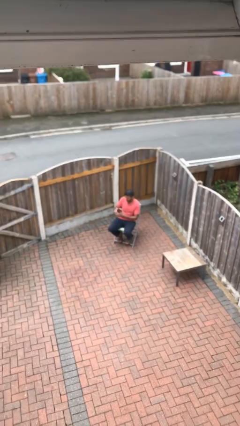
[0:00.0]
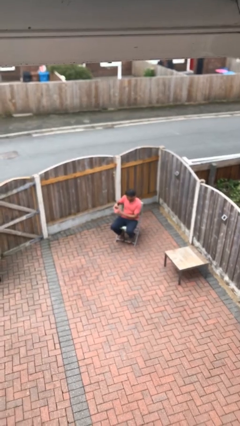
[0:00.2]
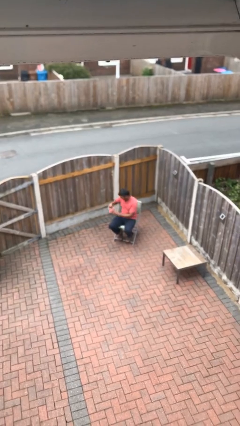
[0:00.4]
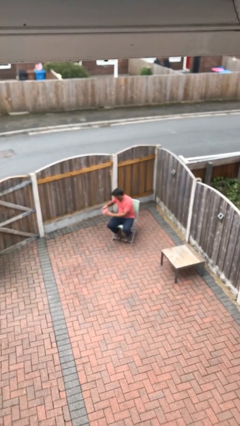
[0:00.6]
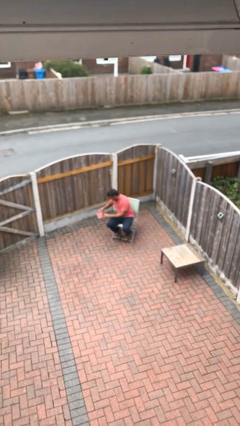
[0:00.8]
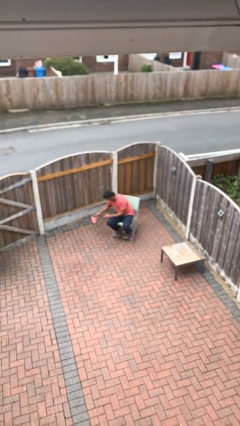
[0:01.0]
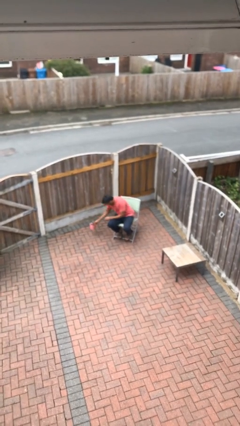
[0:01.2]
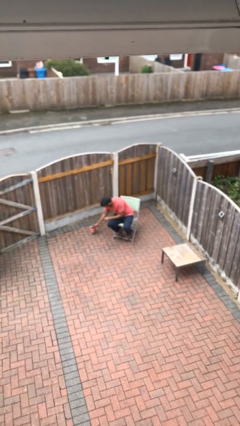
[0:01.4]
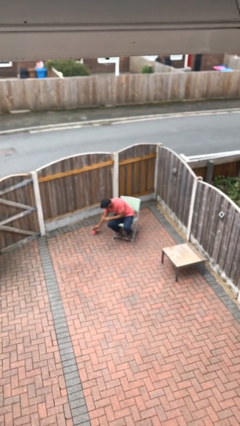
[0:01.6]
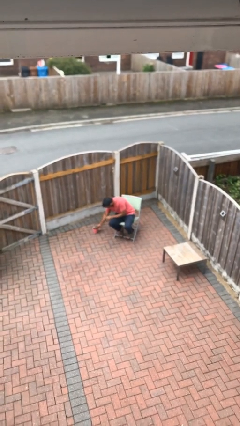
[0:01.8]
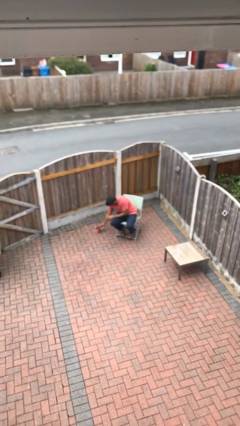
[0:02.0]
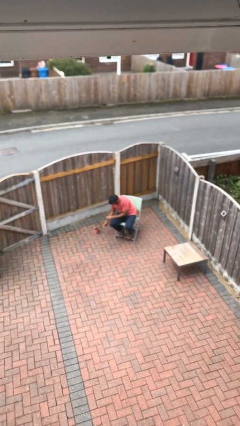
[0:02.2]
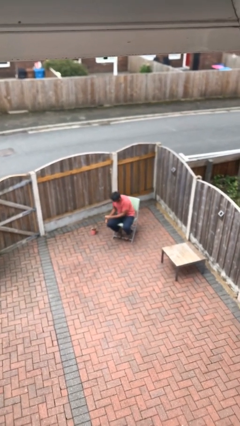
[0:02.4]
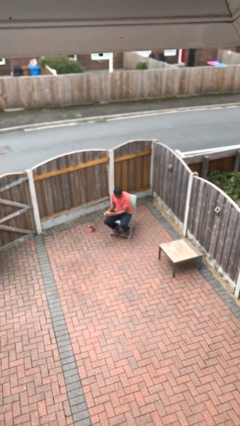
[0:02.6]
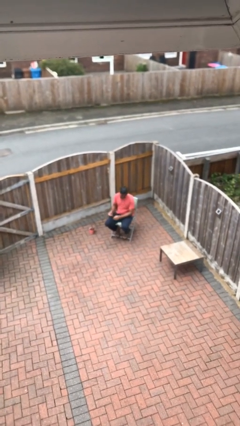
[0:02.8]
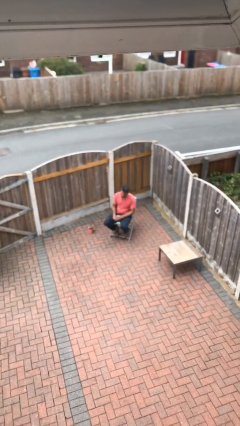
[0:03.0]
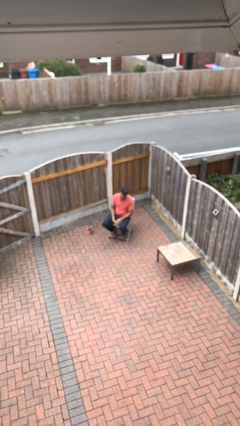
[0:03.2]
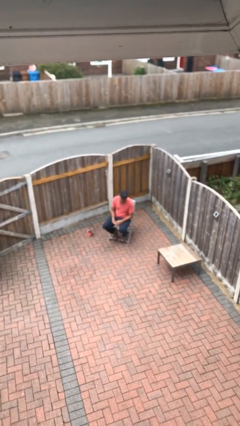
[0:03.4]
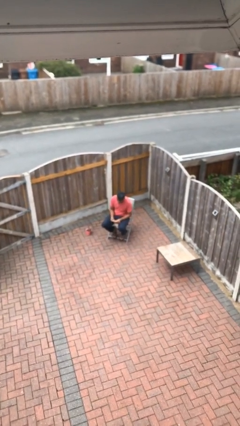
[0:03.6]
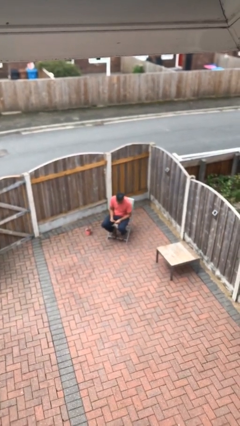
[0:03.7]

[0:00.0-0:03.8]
person puts down object on floor

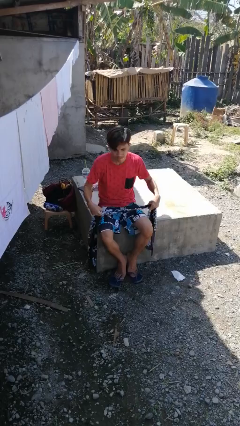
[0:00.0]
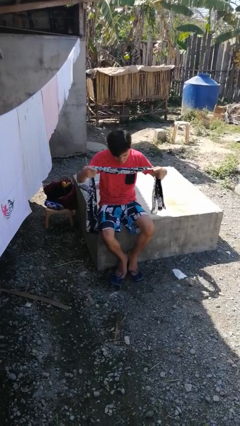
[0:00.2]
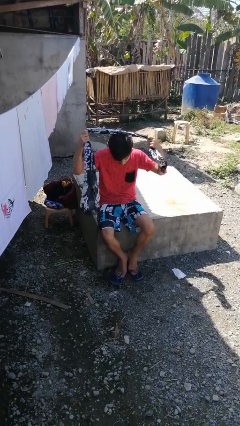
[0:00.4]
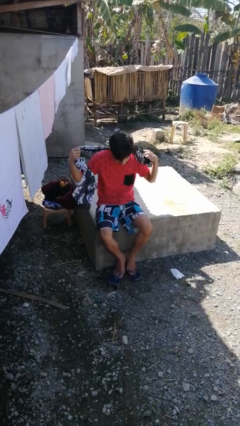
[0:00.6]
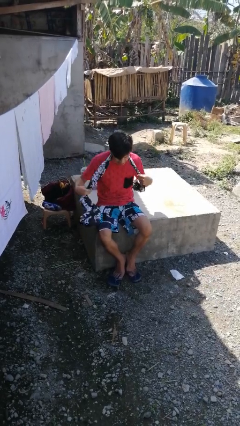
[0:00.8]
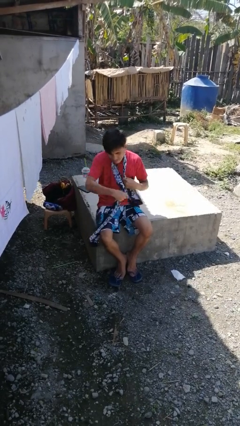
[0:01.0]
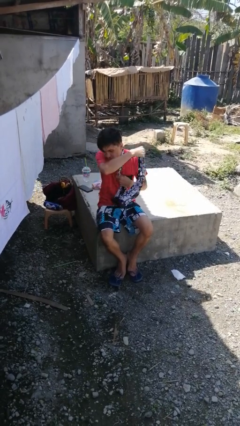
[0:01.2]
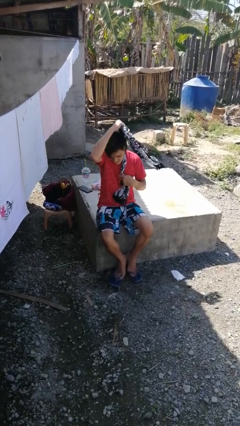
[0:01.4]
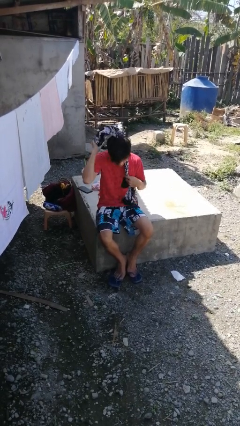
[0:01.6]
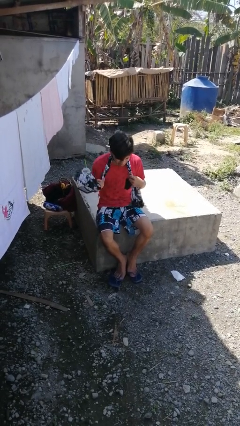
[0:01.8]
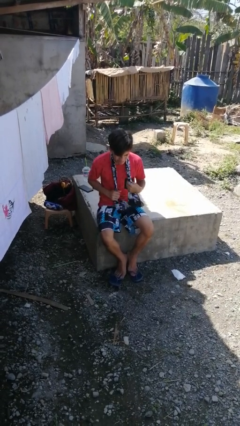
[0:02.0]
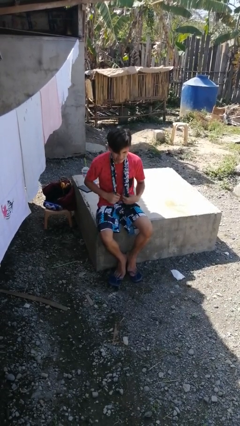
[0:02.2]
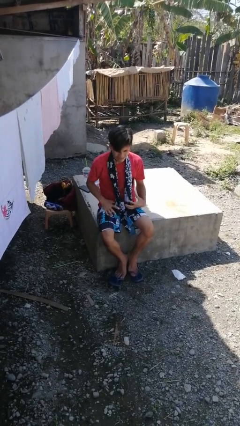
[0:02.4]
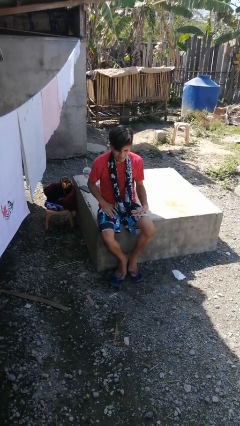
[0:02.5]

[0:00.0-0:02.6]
person puts on scarf

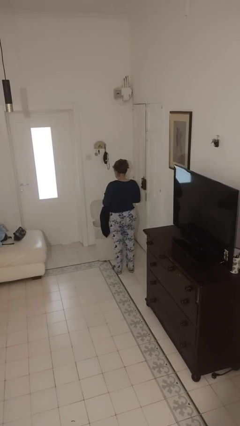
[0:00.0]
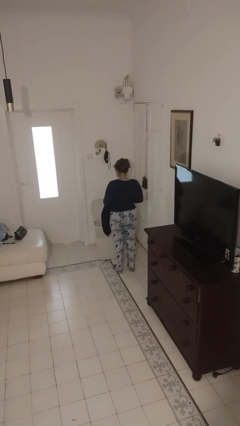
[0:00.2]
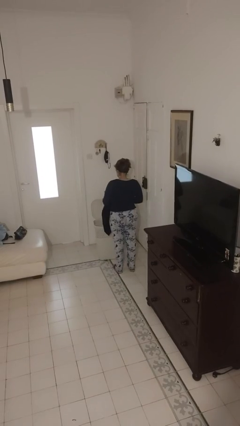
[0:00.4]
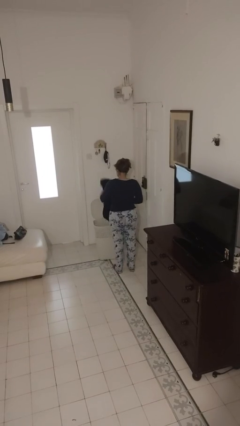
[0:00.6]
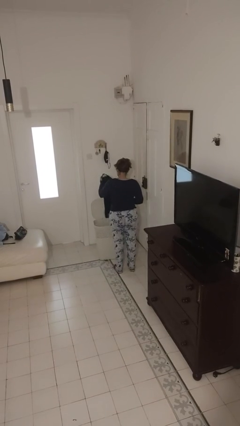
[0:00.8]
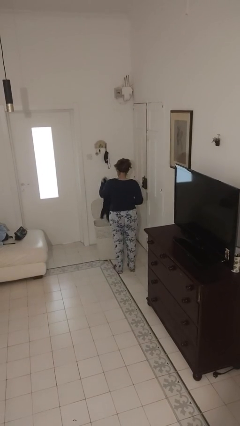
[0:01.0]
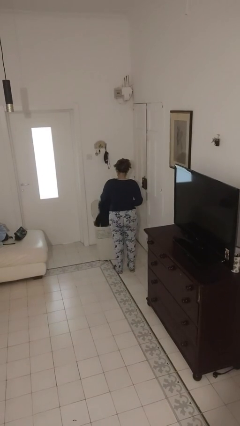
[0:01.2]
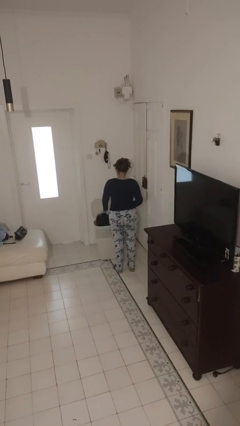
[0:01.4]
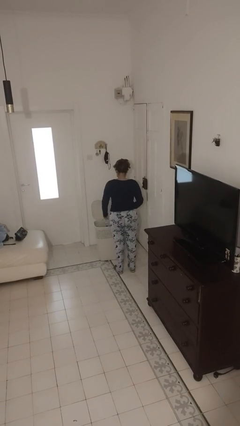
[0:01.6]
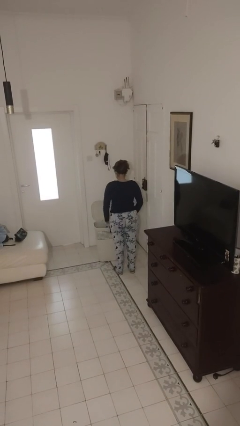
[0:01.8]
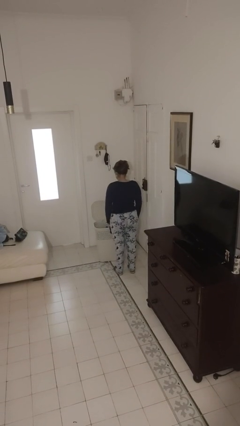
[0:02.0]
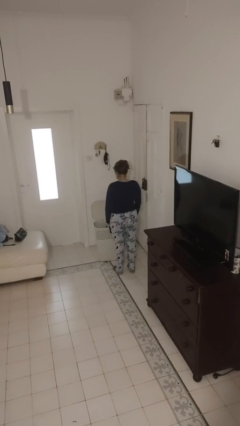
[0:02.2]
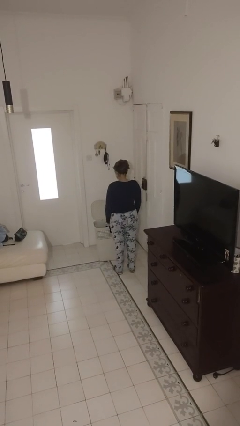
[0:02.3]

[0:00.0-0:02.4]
person puts object into basket

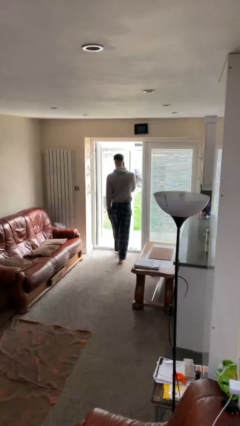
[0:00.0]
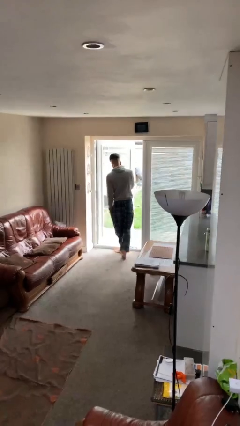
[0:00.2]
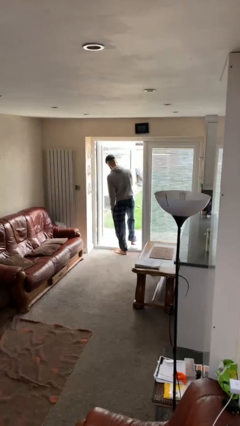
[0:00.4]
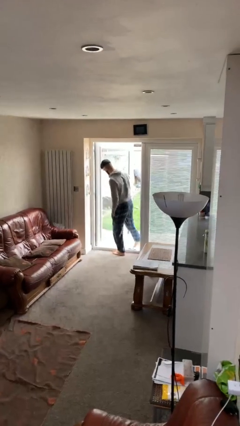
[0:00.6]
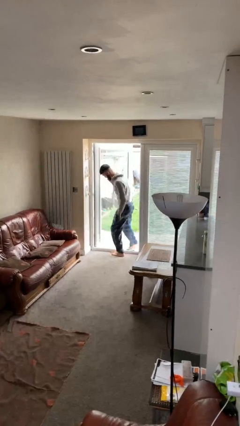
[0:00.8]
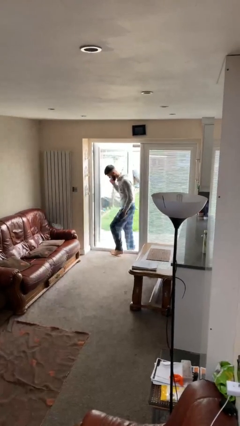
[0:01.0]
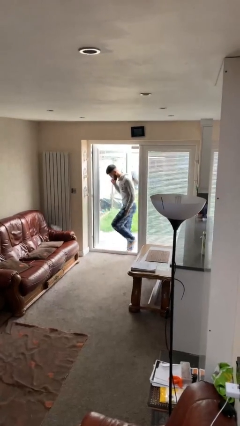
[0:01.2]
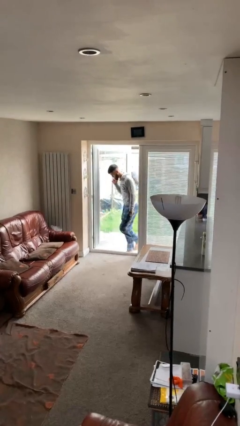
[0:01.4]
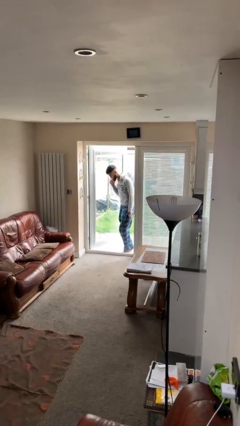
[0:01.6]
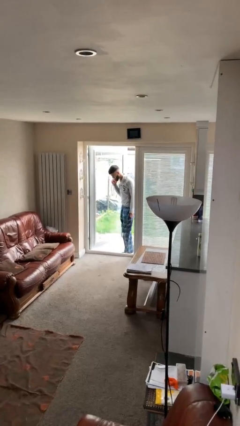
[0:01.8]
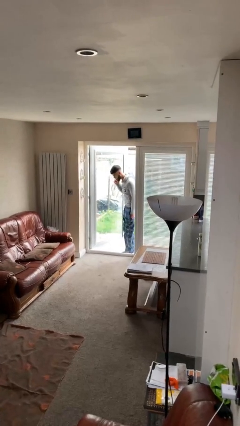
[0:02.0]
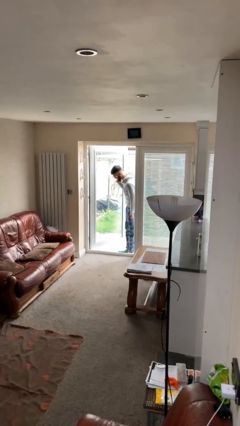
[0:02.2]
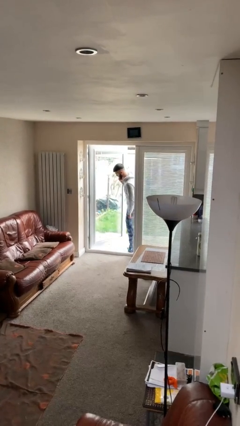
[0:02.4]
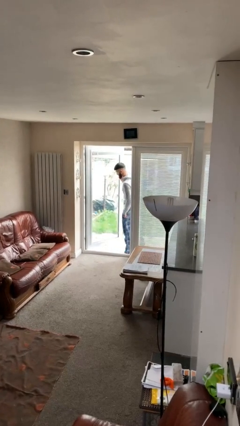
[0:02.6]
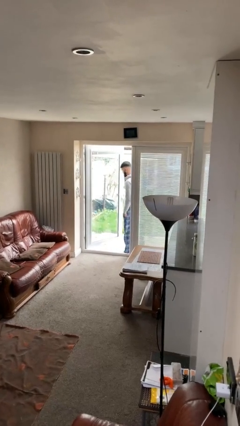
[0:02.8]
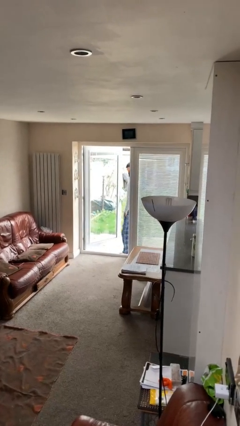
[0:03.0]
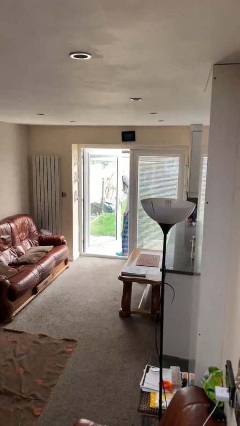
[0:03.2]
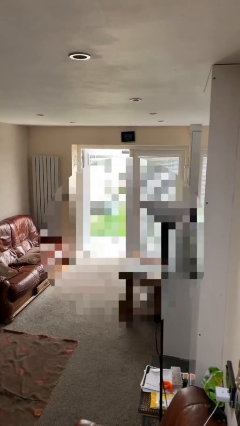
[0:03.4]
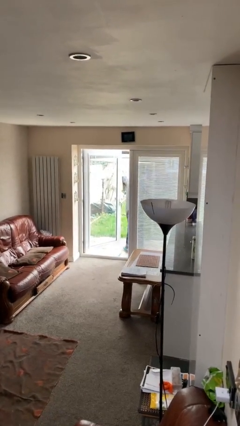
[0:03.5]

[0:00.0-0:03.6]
person exits scene through structure

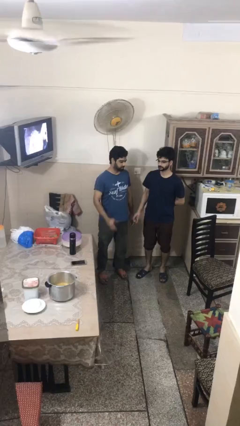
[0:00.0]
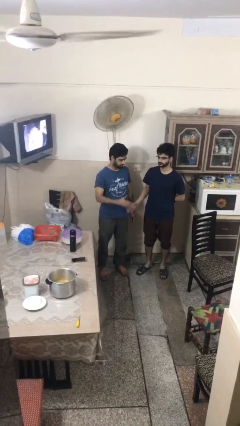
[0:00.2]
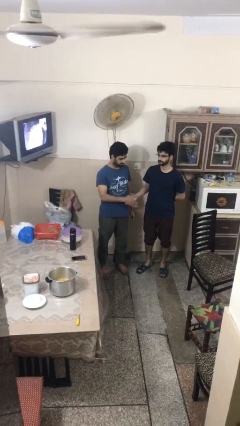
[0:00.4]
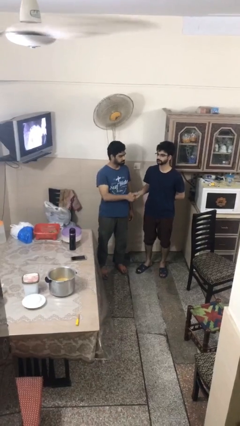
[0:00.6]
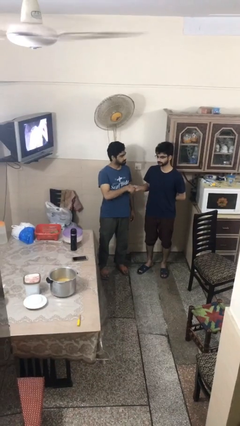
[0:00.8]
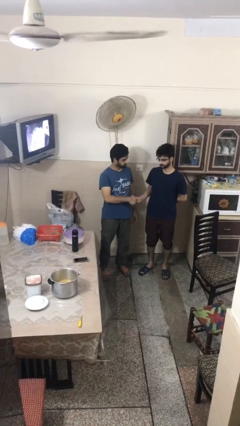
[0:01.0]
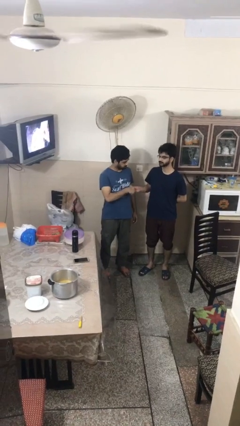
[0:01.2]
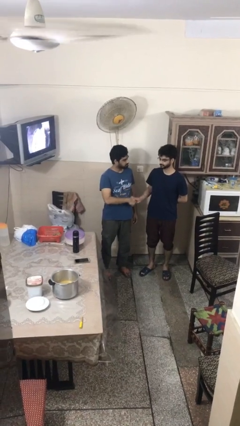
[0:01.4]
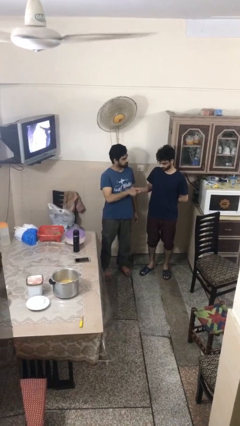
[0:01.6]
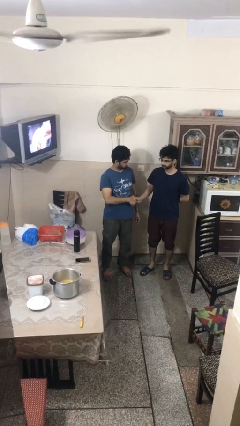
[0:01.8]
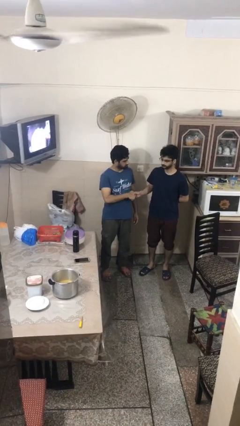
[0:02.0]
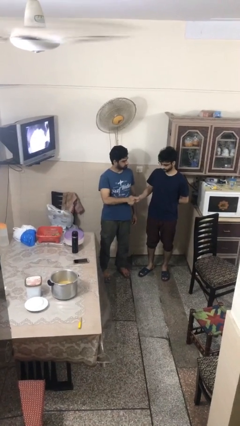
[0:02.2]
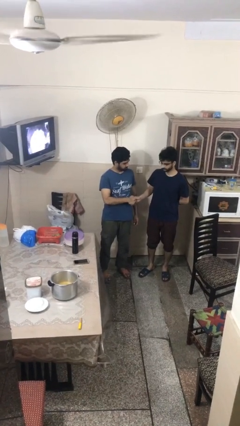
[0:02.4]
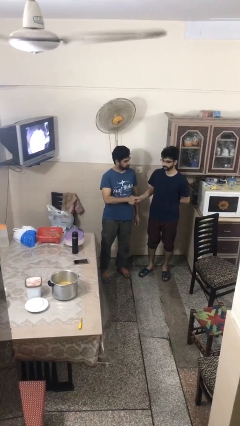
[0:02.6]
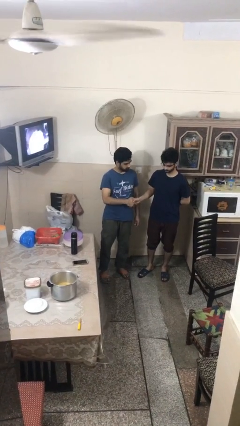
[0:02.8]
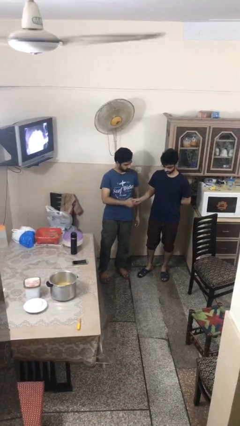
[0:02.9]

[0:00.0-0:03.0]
person shakes hand

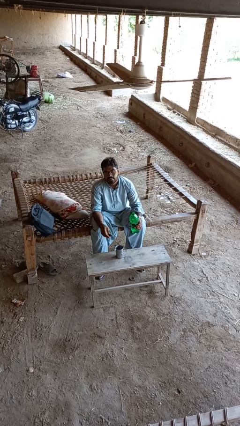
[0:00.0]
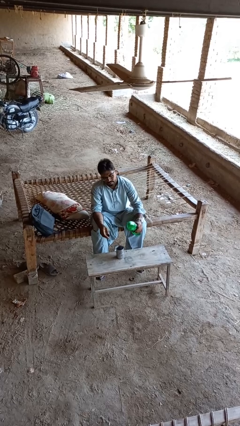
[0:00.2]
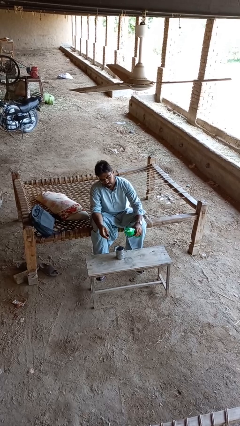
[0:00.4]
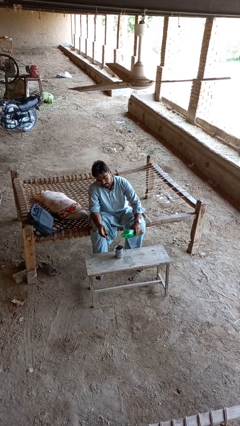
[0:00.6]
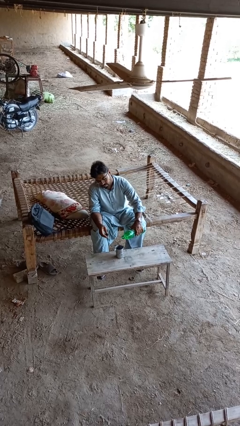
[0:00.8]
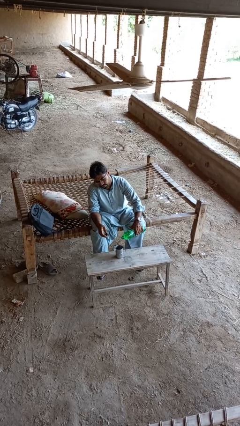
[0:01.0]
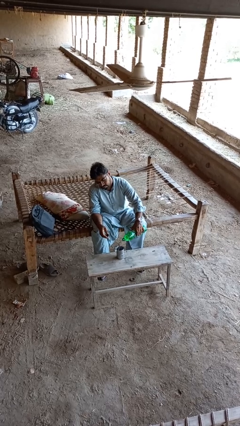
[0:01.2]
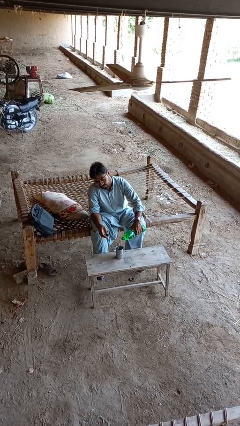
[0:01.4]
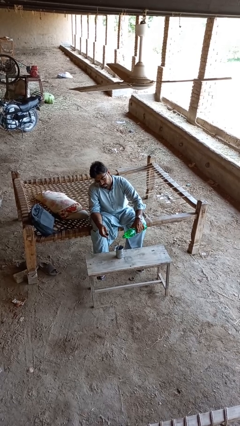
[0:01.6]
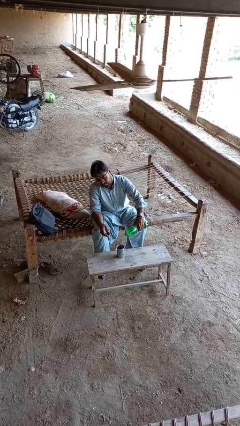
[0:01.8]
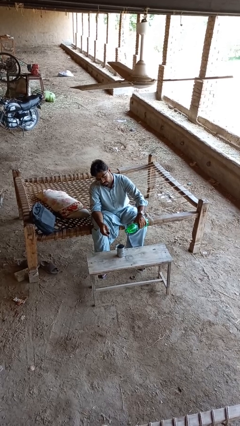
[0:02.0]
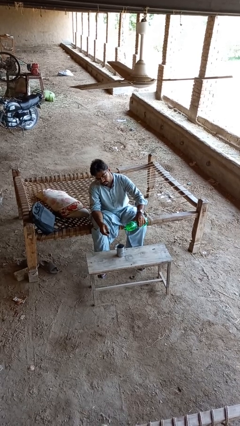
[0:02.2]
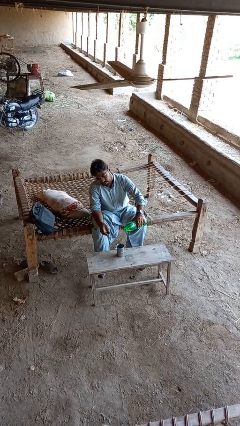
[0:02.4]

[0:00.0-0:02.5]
person pours liquid into cup
